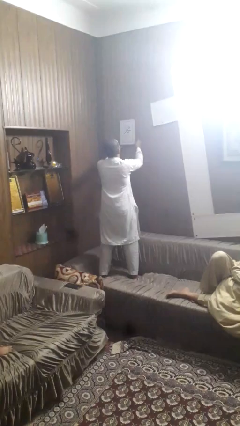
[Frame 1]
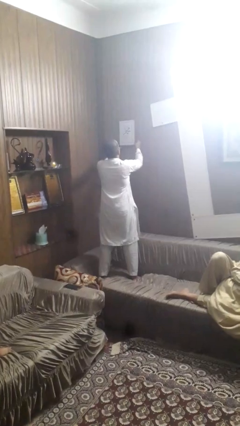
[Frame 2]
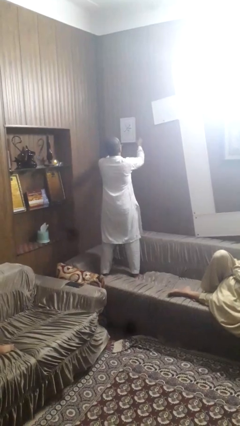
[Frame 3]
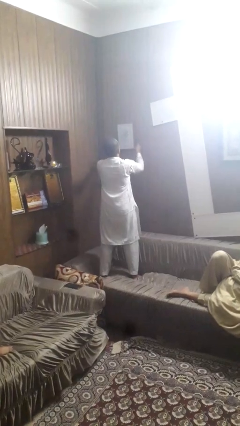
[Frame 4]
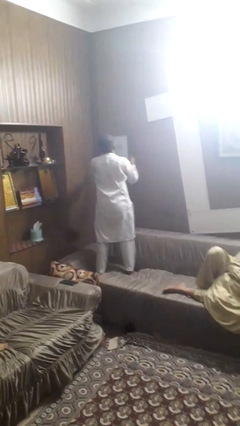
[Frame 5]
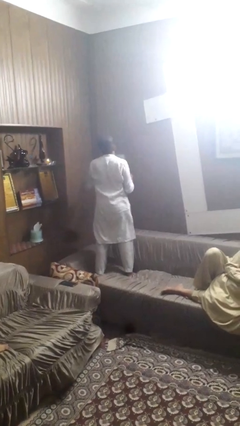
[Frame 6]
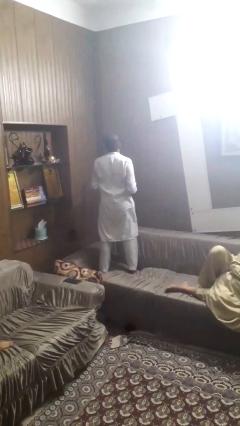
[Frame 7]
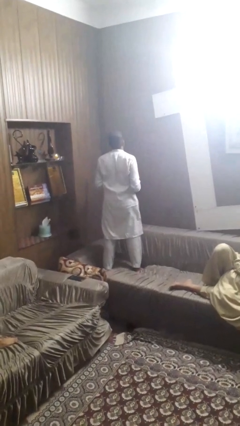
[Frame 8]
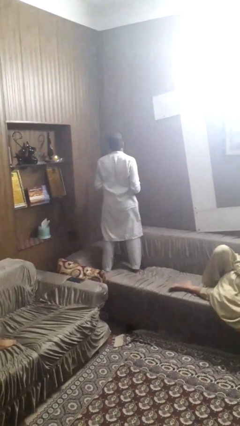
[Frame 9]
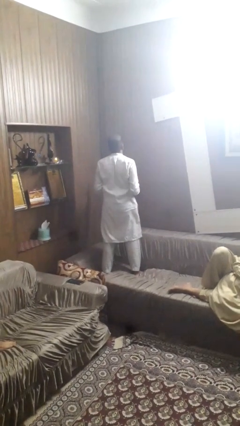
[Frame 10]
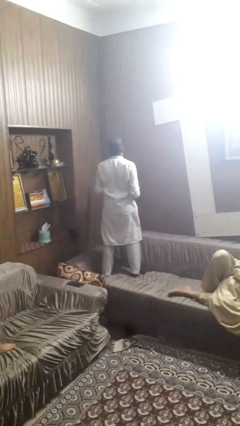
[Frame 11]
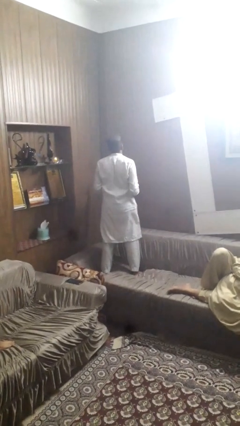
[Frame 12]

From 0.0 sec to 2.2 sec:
person takes down picture frame

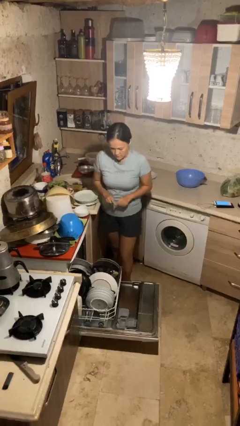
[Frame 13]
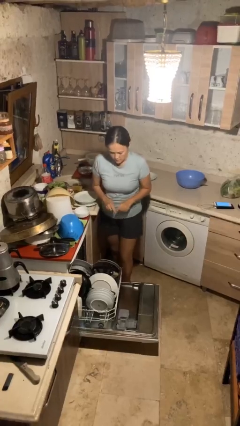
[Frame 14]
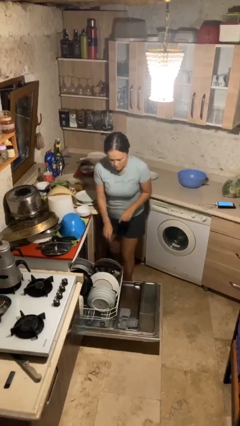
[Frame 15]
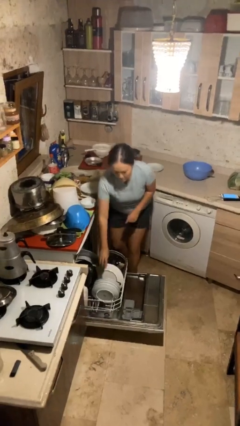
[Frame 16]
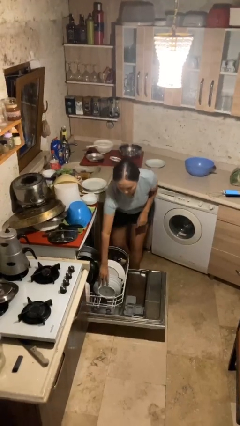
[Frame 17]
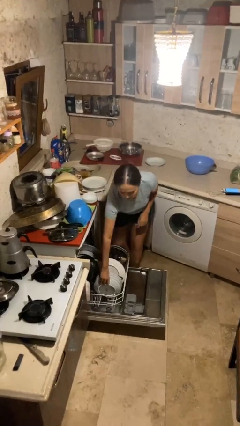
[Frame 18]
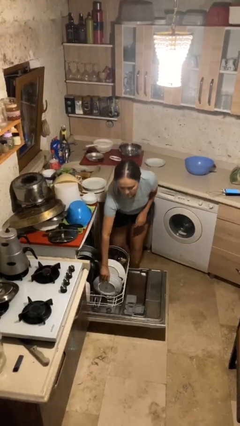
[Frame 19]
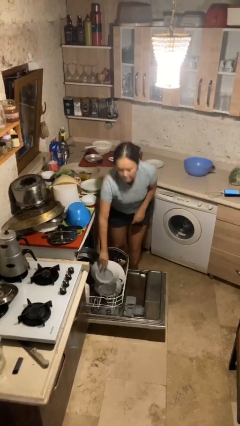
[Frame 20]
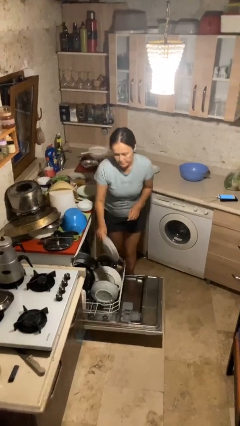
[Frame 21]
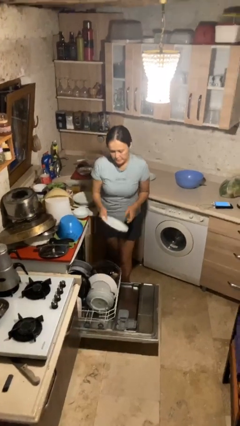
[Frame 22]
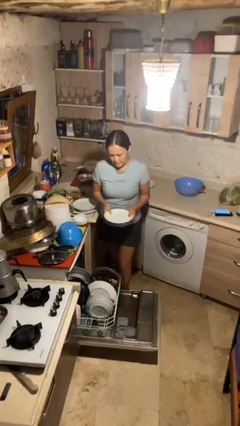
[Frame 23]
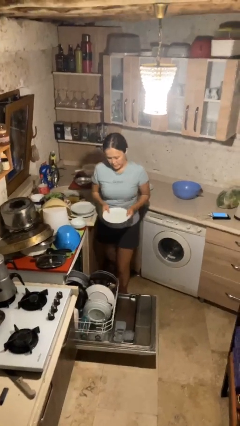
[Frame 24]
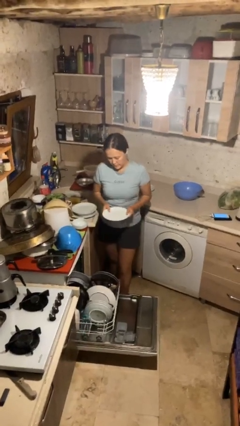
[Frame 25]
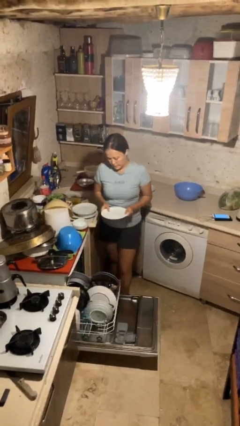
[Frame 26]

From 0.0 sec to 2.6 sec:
person unloads dishwasher

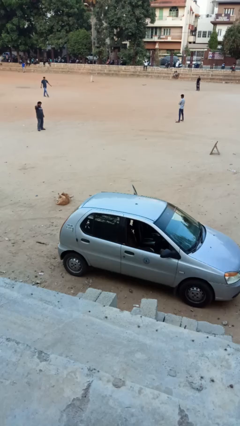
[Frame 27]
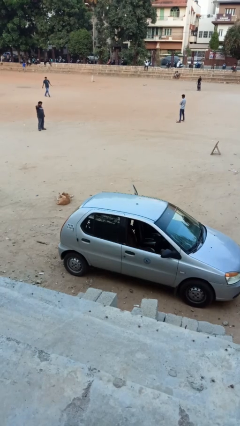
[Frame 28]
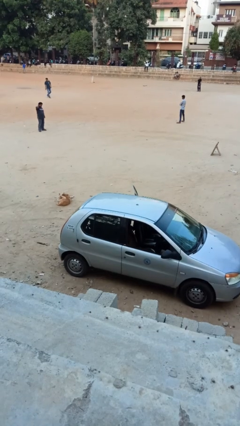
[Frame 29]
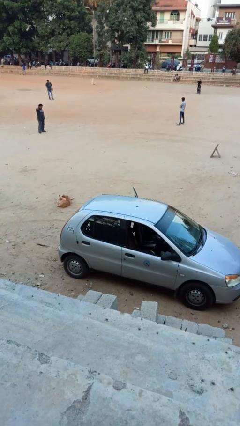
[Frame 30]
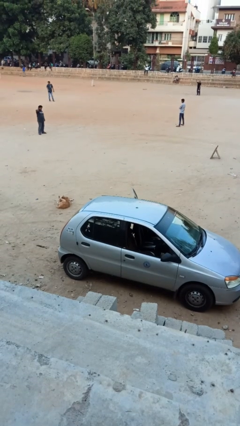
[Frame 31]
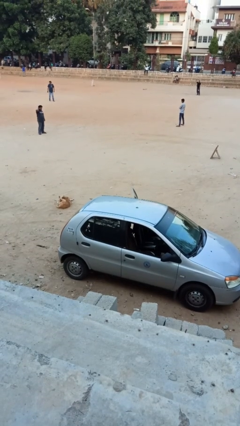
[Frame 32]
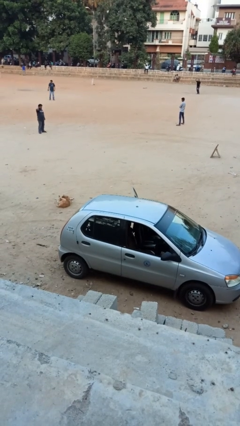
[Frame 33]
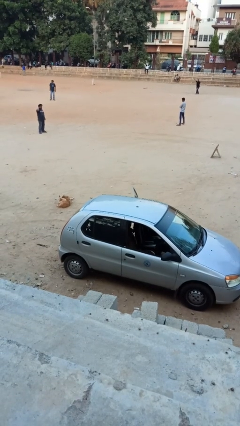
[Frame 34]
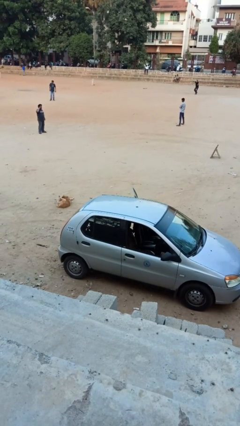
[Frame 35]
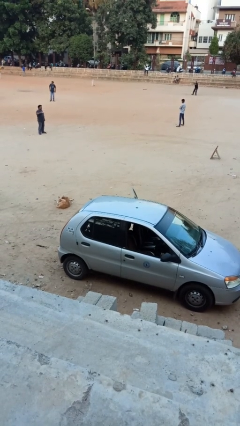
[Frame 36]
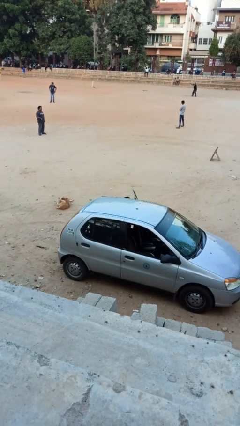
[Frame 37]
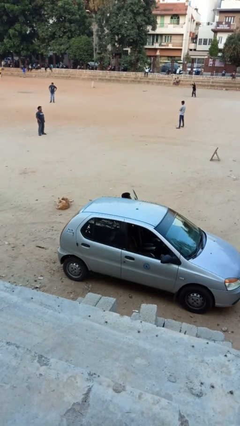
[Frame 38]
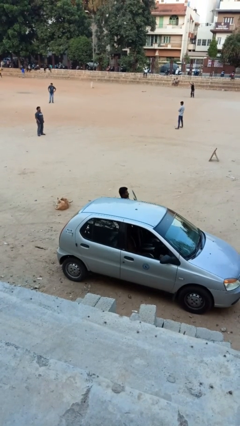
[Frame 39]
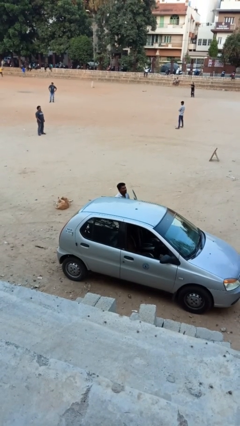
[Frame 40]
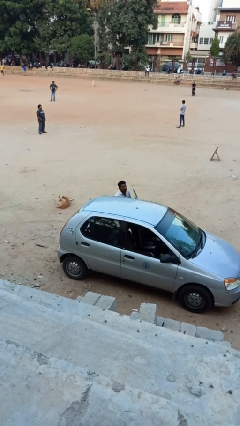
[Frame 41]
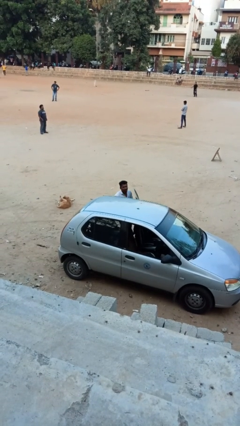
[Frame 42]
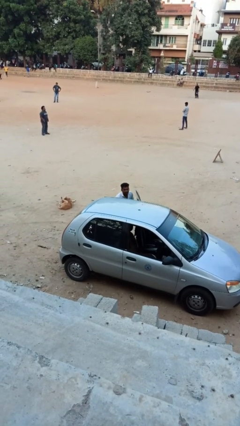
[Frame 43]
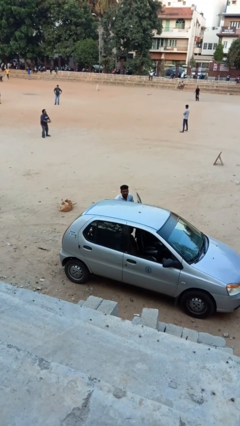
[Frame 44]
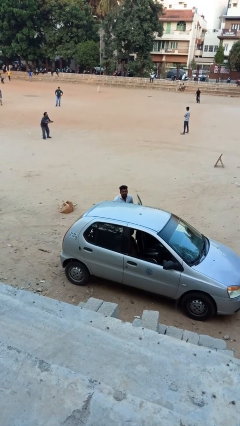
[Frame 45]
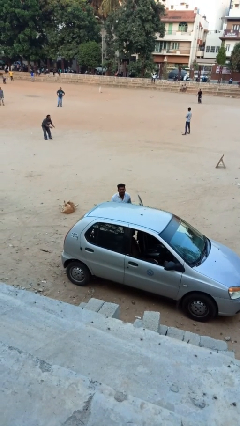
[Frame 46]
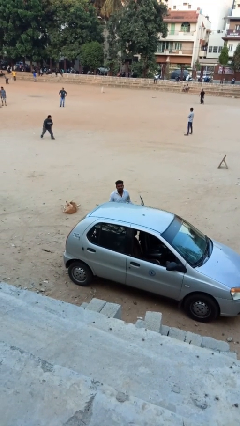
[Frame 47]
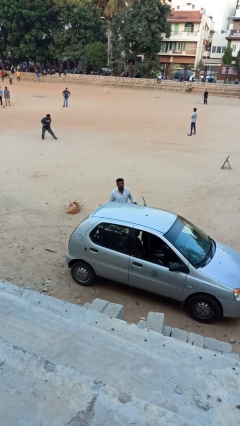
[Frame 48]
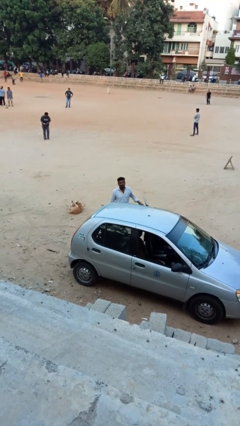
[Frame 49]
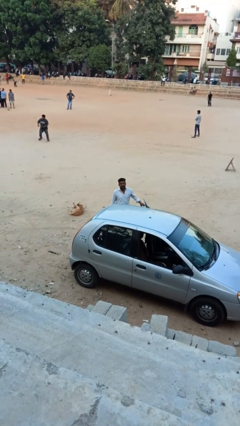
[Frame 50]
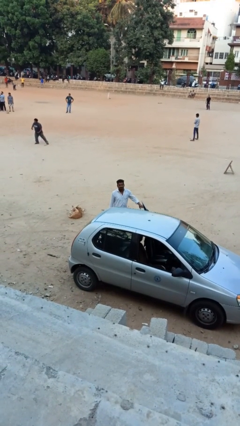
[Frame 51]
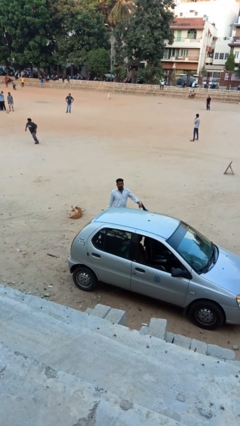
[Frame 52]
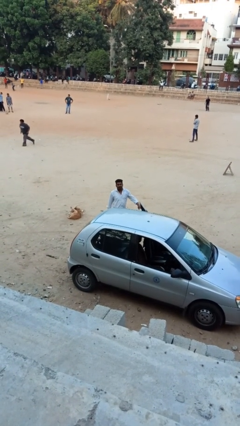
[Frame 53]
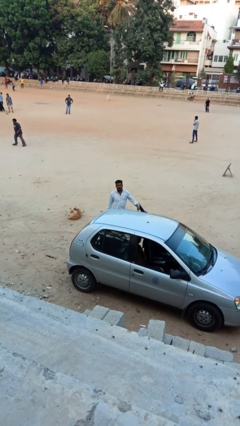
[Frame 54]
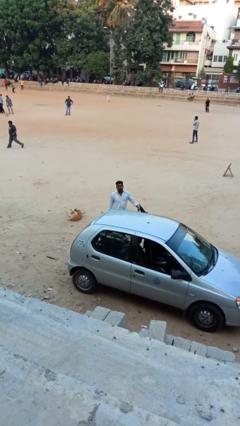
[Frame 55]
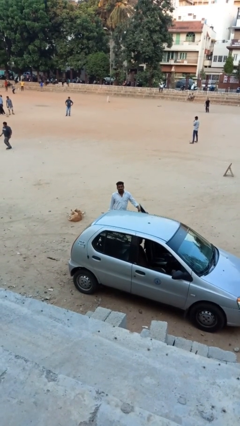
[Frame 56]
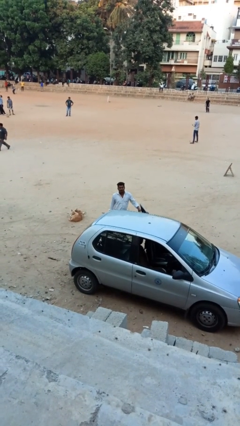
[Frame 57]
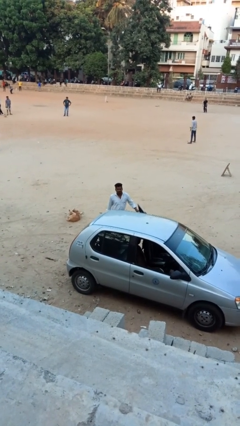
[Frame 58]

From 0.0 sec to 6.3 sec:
person exits car

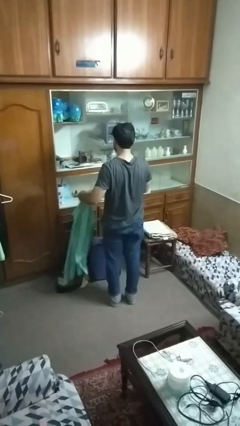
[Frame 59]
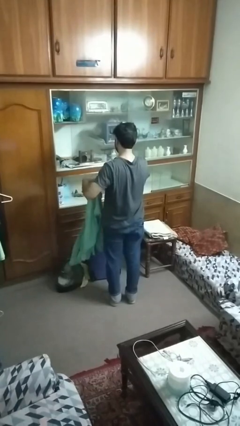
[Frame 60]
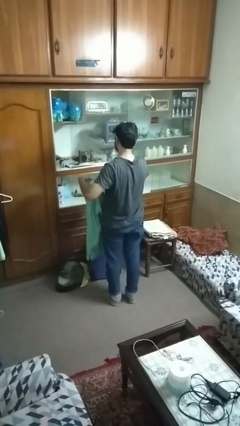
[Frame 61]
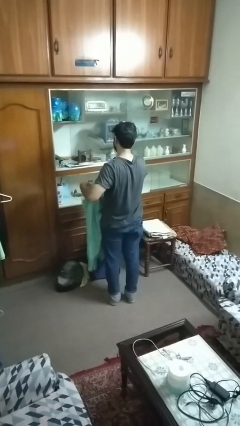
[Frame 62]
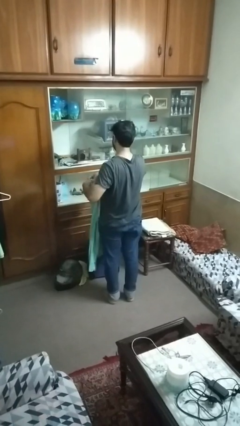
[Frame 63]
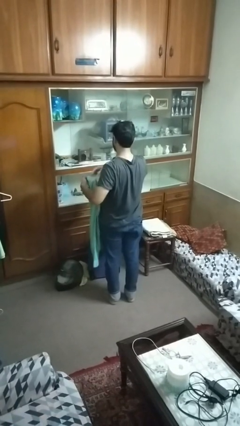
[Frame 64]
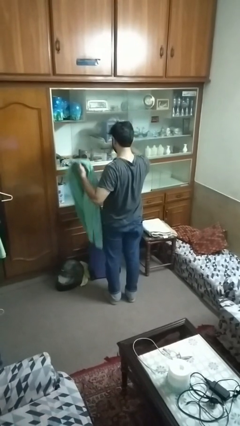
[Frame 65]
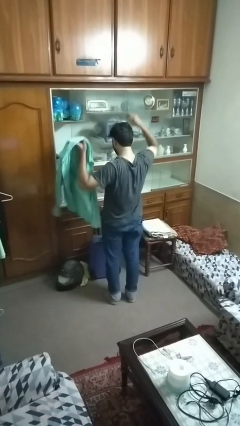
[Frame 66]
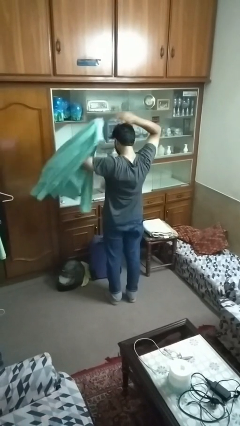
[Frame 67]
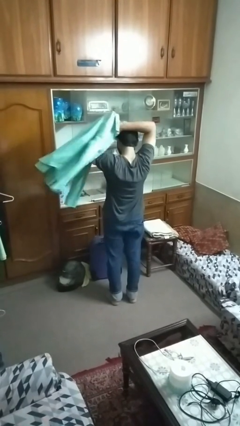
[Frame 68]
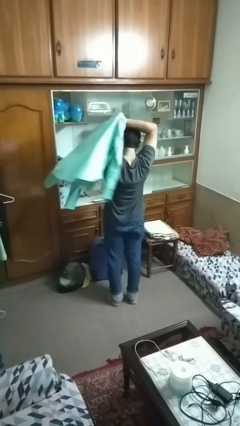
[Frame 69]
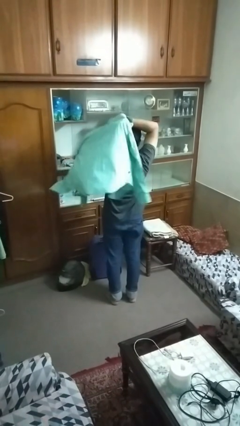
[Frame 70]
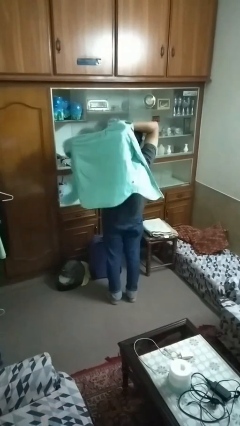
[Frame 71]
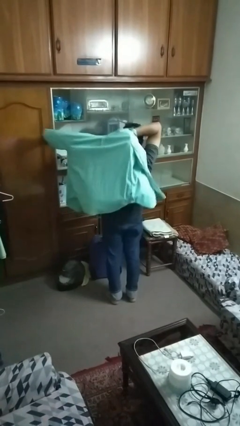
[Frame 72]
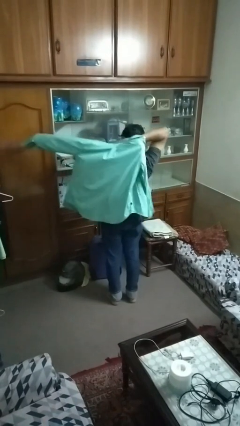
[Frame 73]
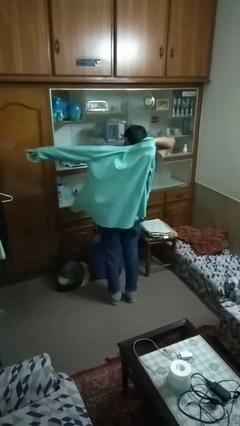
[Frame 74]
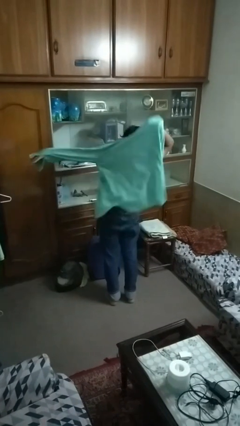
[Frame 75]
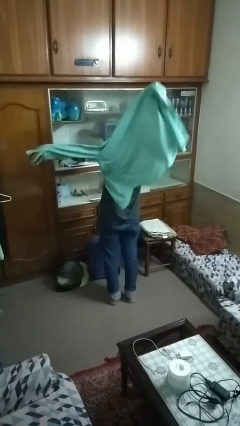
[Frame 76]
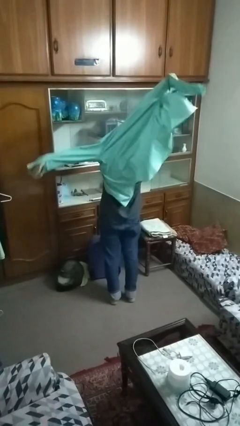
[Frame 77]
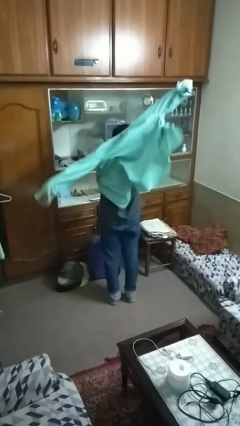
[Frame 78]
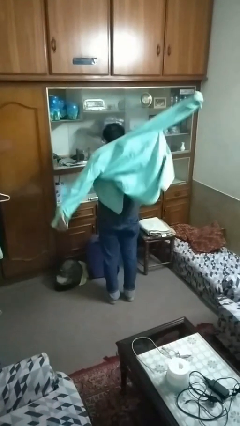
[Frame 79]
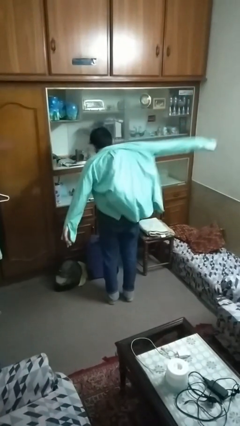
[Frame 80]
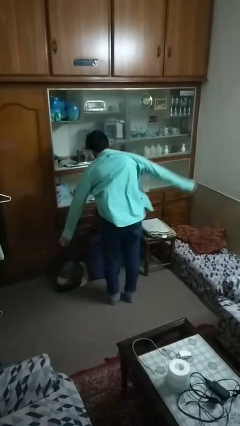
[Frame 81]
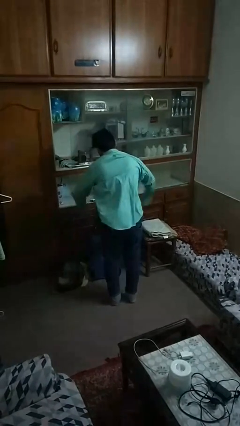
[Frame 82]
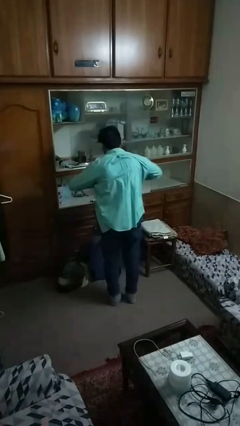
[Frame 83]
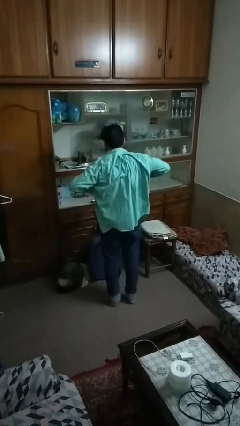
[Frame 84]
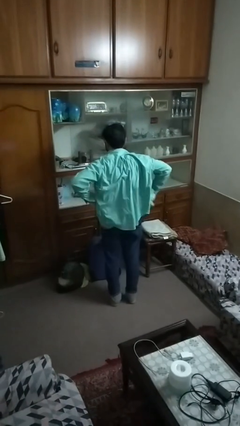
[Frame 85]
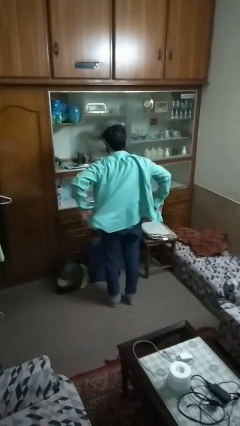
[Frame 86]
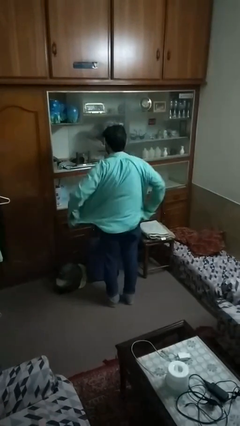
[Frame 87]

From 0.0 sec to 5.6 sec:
person puts on shirt

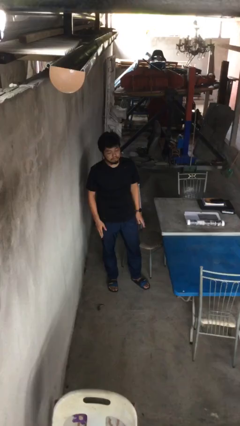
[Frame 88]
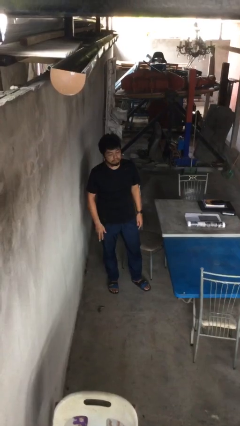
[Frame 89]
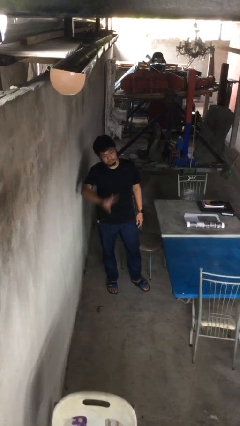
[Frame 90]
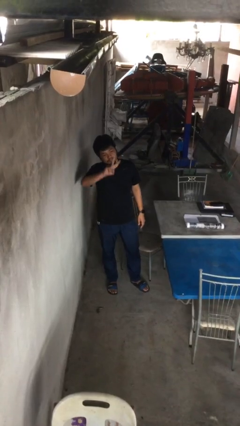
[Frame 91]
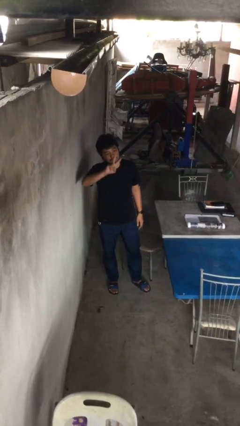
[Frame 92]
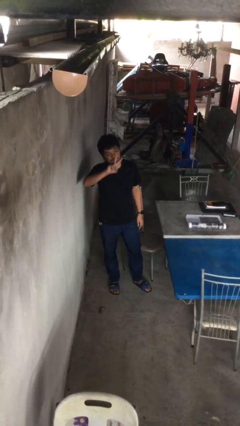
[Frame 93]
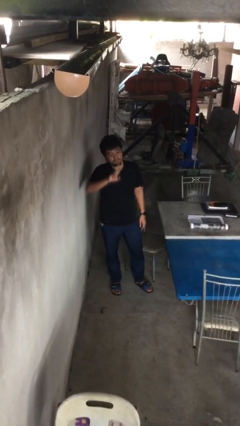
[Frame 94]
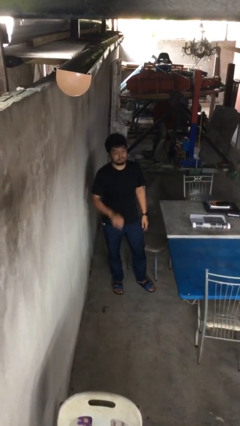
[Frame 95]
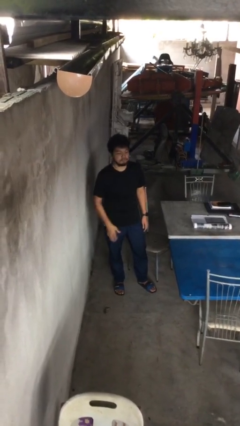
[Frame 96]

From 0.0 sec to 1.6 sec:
person gestures peace
